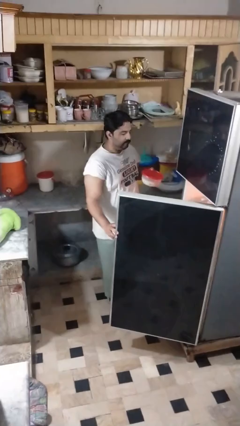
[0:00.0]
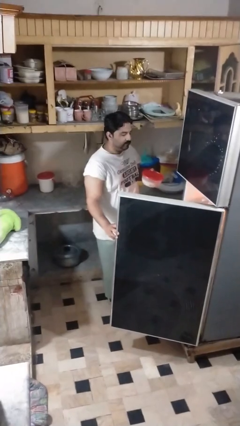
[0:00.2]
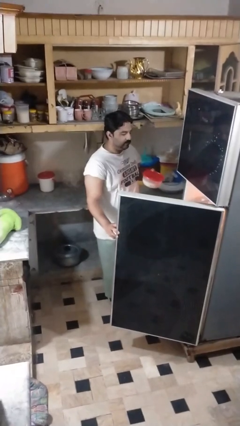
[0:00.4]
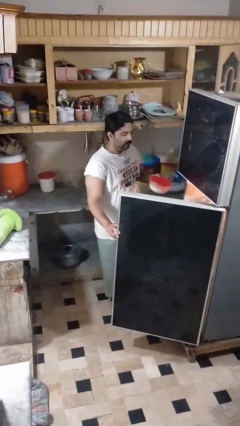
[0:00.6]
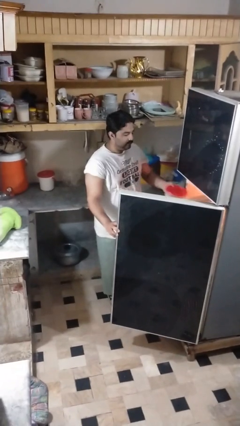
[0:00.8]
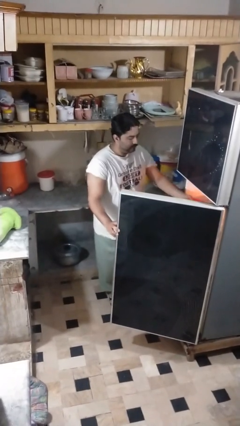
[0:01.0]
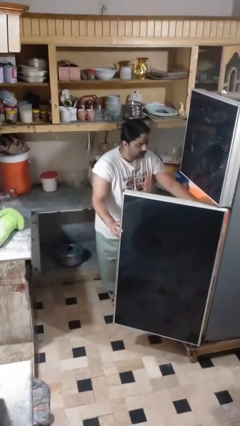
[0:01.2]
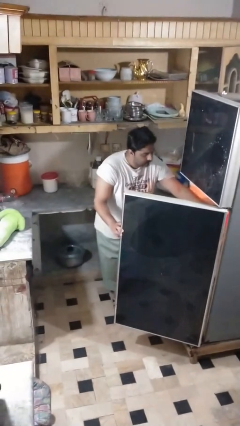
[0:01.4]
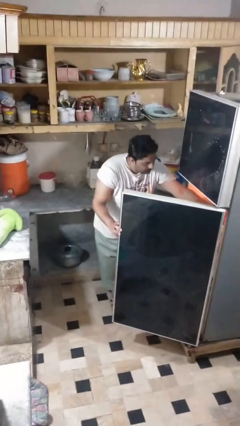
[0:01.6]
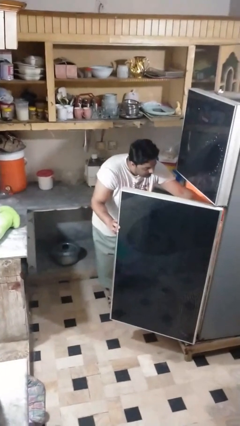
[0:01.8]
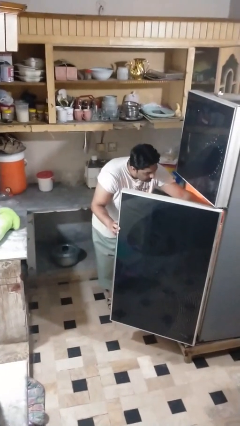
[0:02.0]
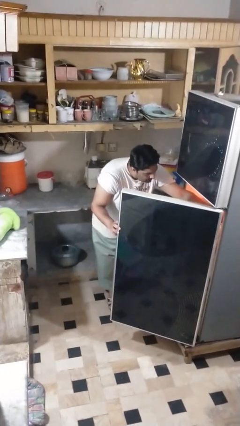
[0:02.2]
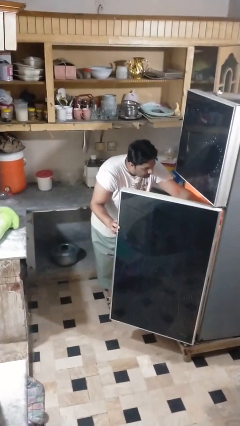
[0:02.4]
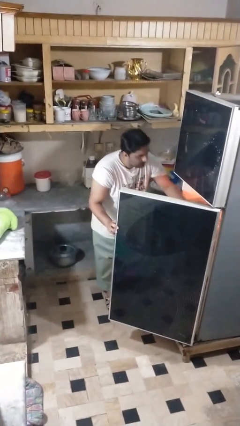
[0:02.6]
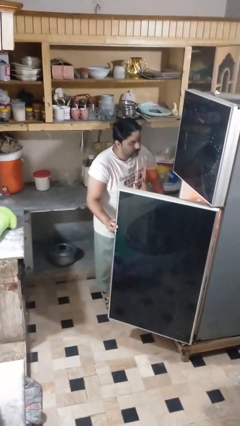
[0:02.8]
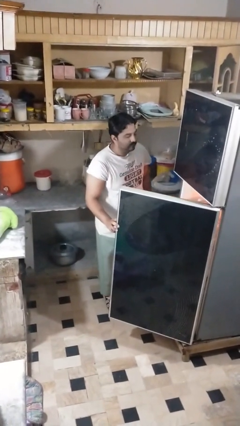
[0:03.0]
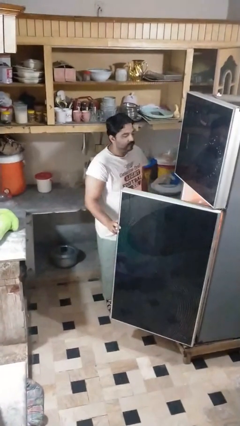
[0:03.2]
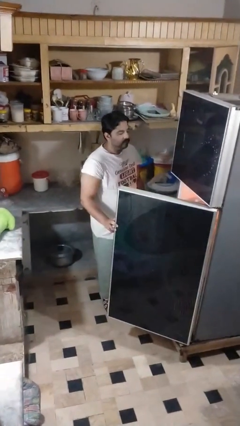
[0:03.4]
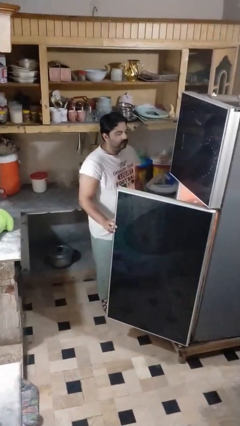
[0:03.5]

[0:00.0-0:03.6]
person puts object into refrigerator

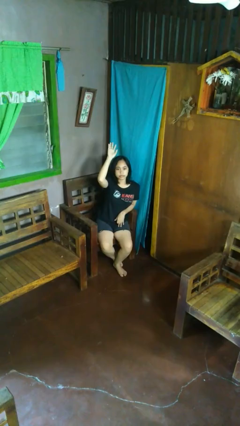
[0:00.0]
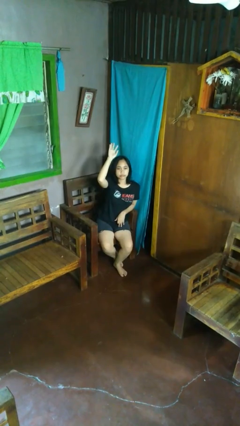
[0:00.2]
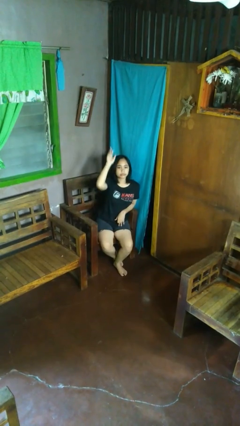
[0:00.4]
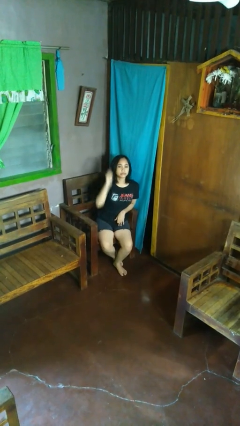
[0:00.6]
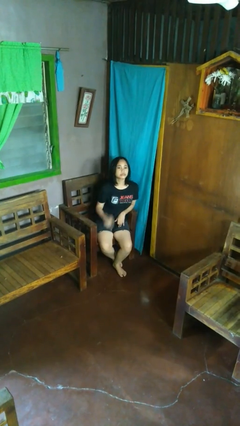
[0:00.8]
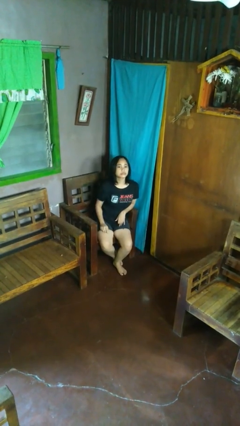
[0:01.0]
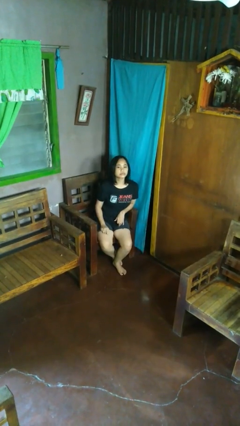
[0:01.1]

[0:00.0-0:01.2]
person gestures lower hand

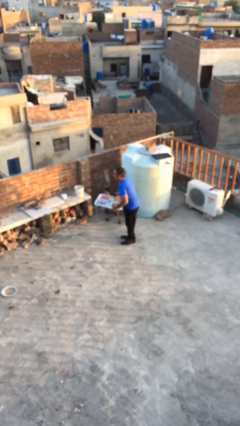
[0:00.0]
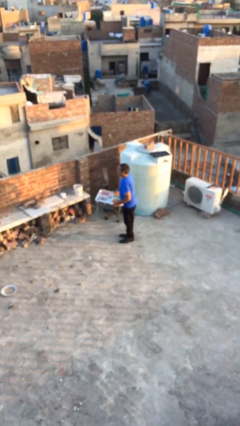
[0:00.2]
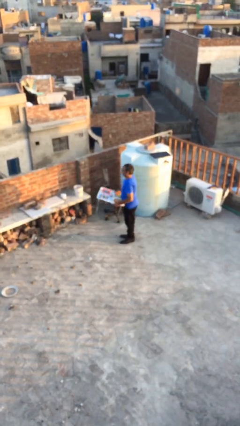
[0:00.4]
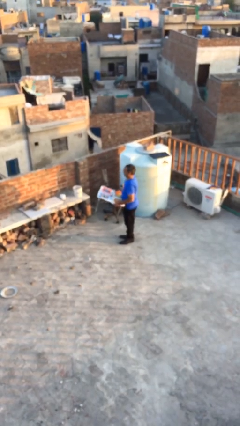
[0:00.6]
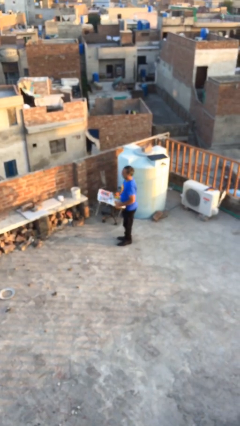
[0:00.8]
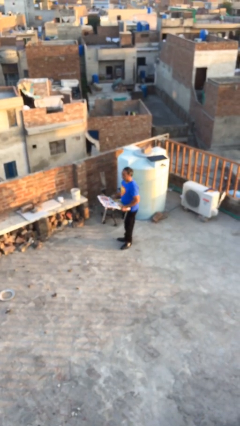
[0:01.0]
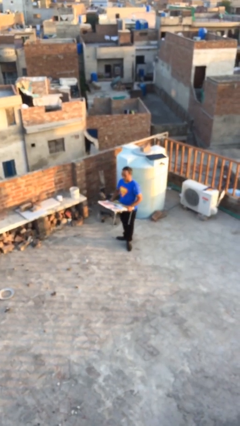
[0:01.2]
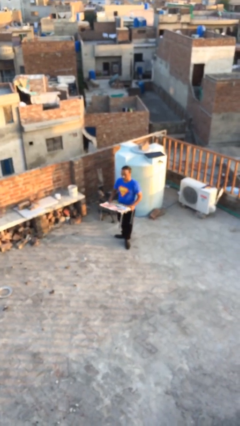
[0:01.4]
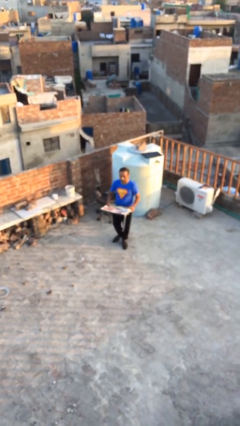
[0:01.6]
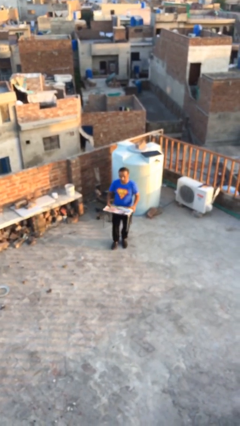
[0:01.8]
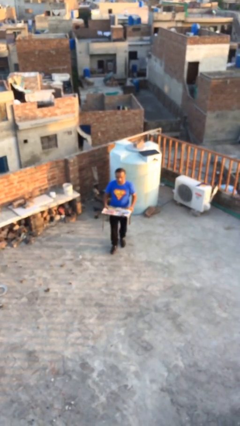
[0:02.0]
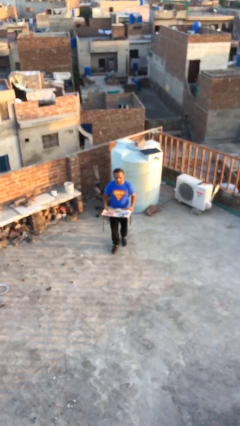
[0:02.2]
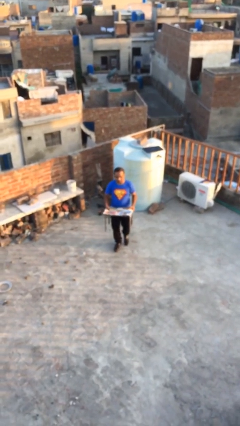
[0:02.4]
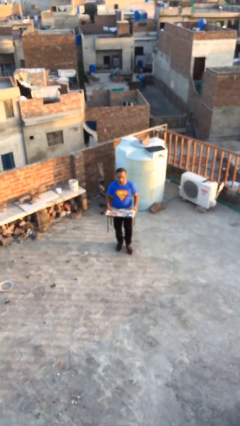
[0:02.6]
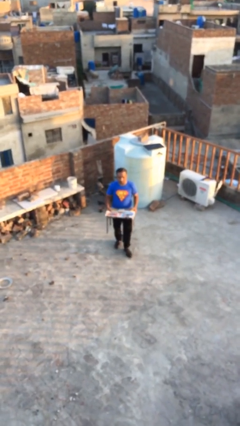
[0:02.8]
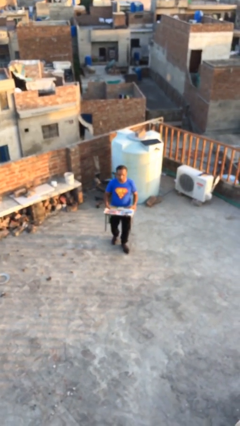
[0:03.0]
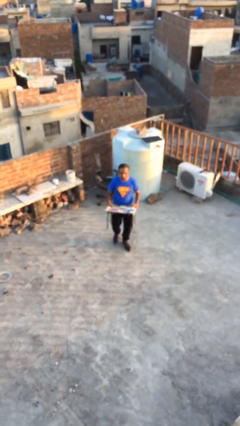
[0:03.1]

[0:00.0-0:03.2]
person carries heavy object

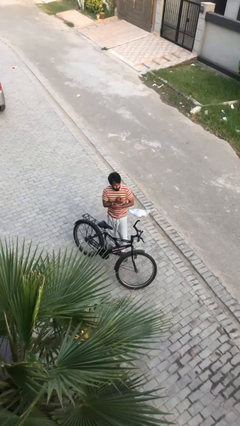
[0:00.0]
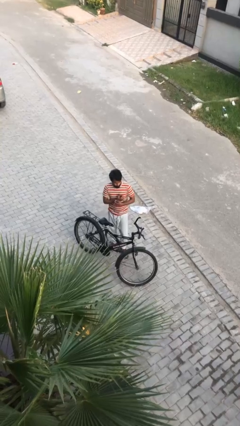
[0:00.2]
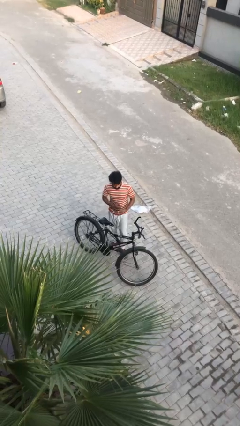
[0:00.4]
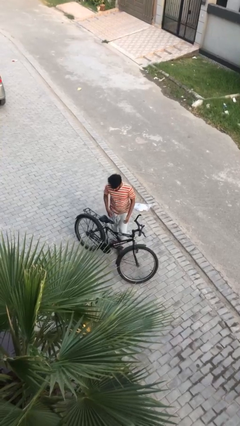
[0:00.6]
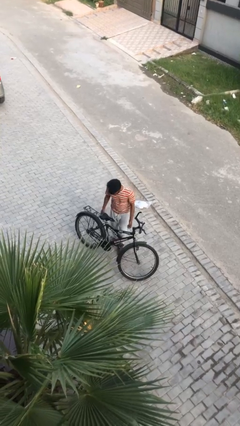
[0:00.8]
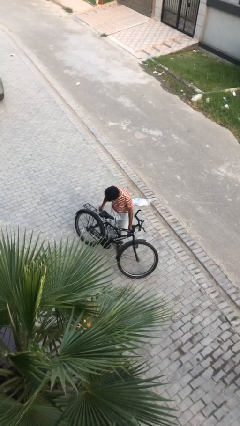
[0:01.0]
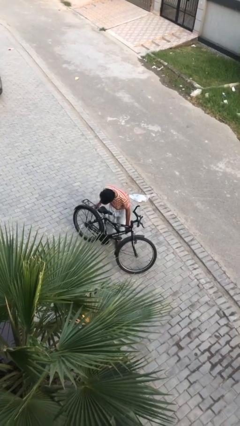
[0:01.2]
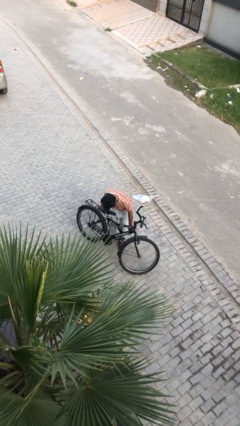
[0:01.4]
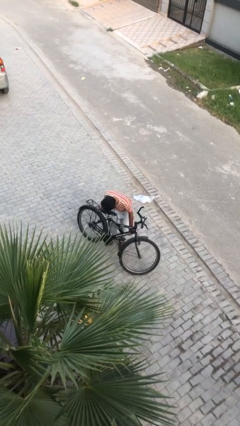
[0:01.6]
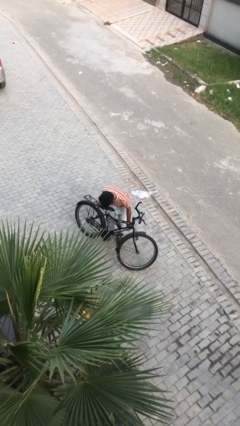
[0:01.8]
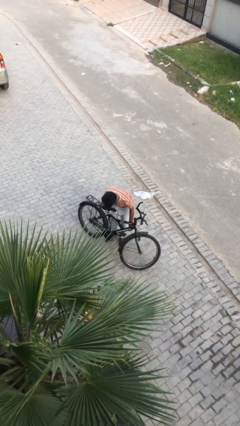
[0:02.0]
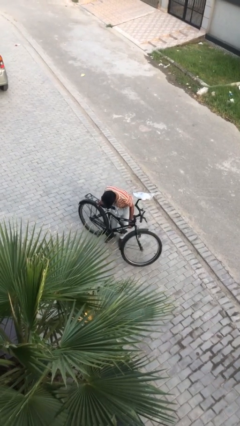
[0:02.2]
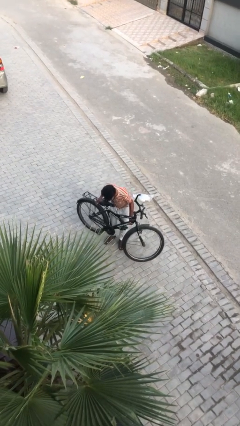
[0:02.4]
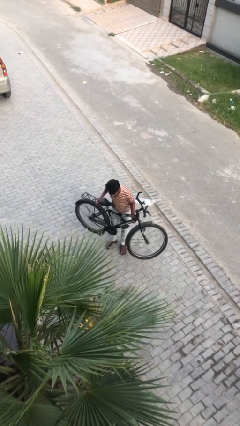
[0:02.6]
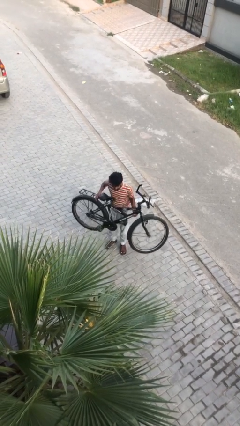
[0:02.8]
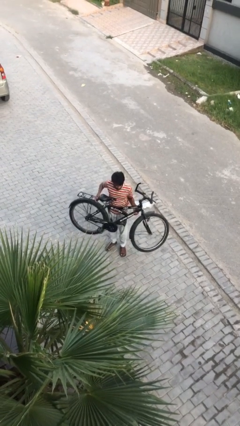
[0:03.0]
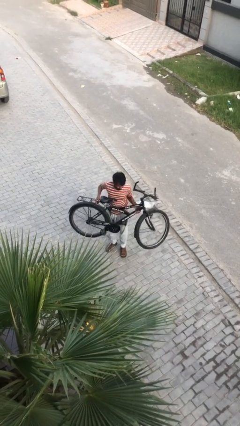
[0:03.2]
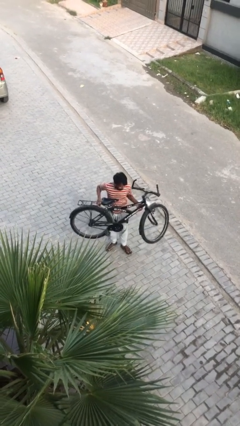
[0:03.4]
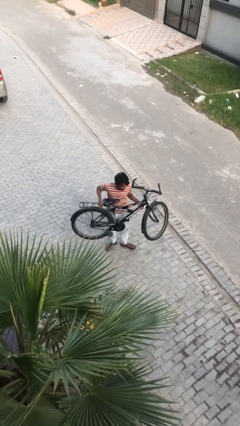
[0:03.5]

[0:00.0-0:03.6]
person picks up object from floor

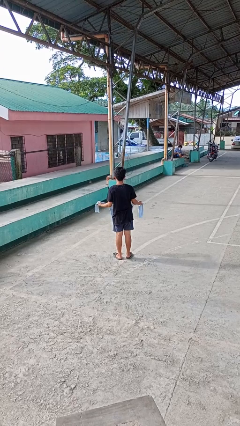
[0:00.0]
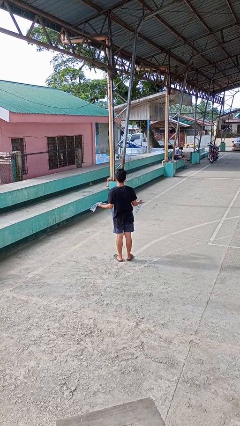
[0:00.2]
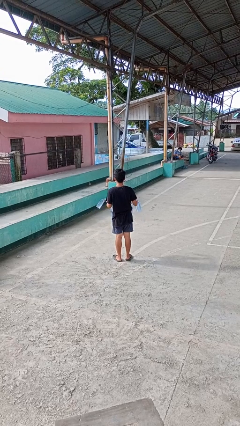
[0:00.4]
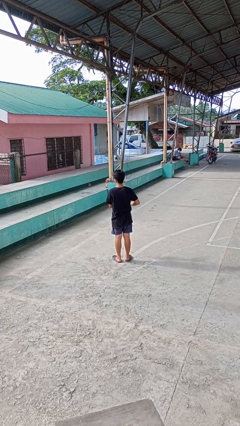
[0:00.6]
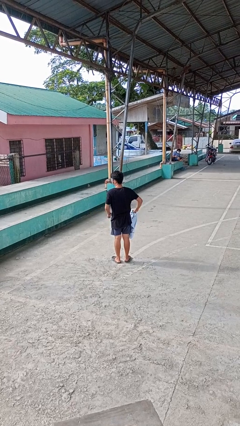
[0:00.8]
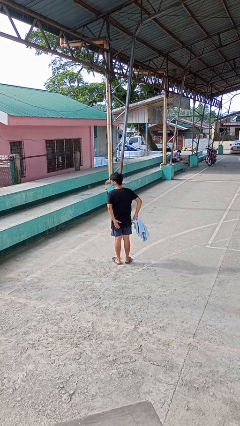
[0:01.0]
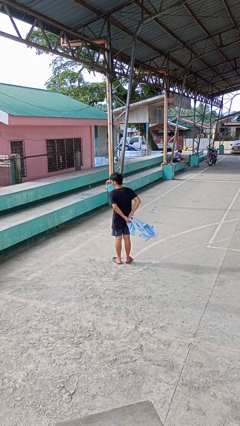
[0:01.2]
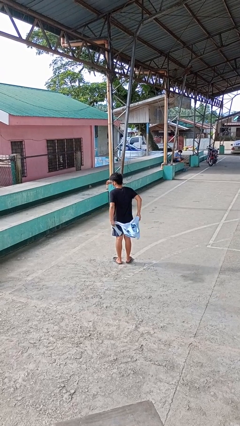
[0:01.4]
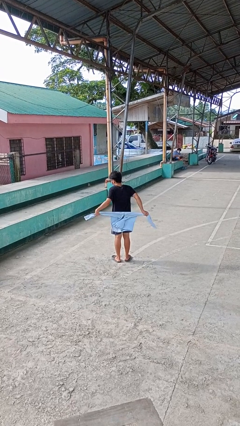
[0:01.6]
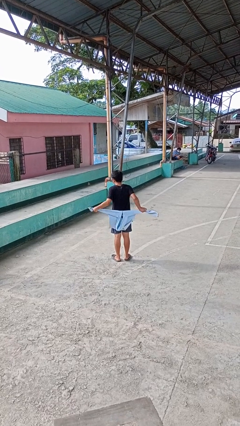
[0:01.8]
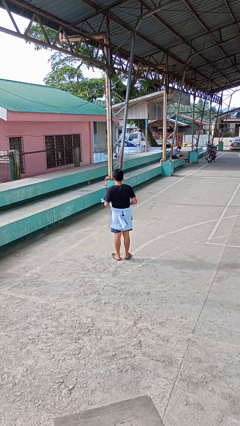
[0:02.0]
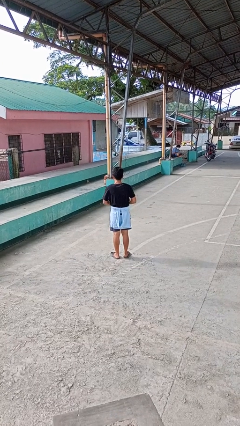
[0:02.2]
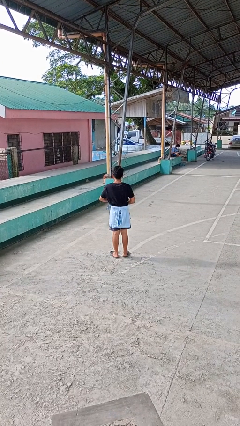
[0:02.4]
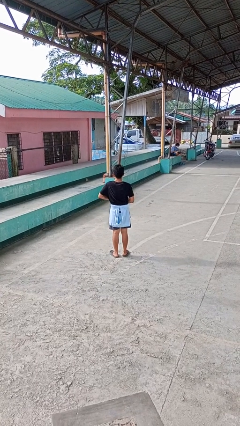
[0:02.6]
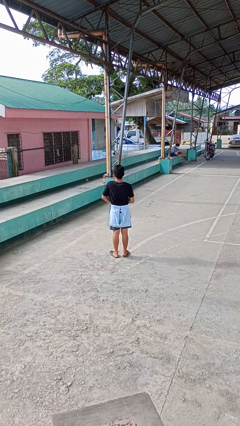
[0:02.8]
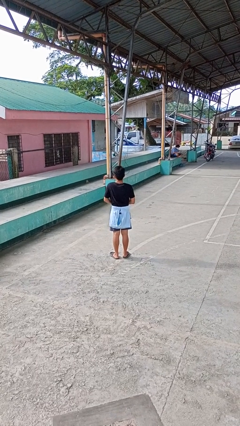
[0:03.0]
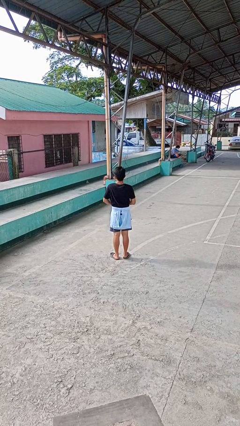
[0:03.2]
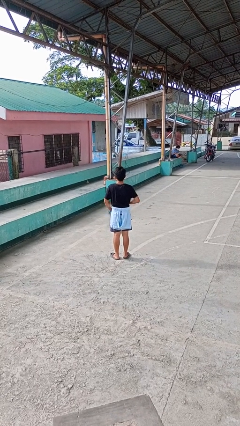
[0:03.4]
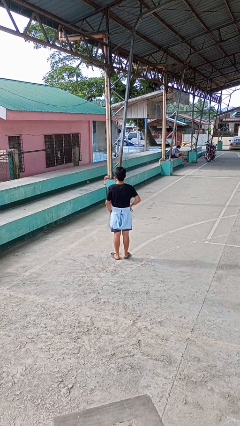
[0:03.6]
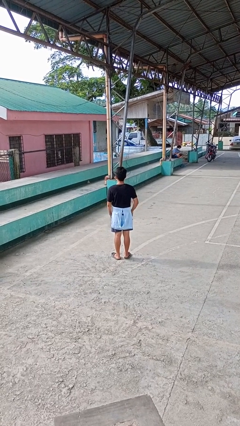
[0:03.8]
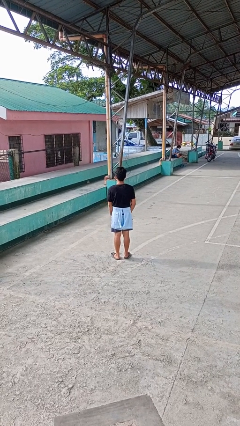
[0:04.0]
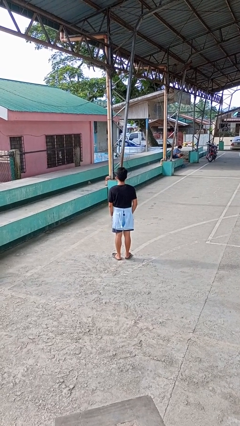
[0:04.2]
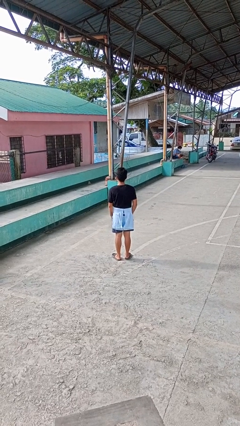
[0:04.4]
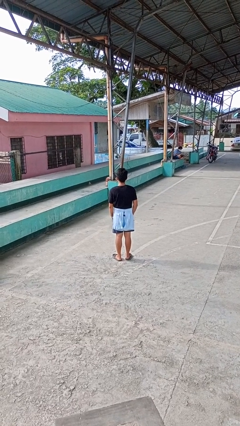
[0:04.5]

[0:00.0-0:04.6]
person ties jacket around waist

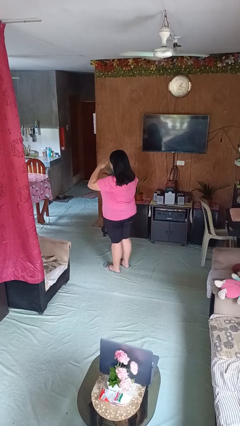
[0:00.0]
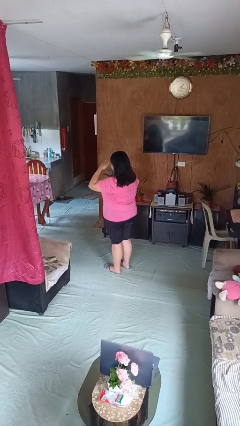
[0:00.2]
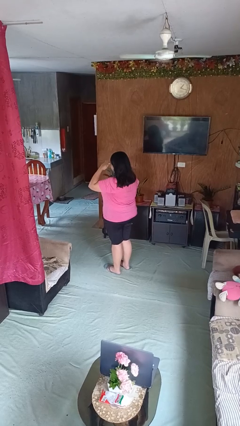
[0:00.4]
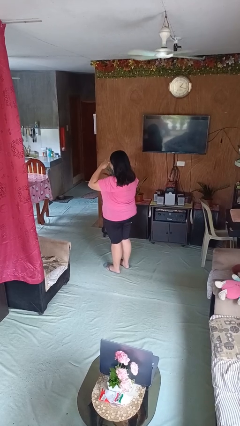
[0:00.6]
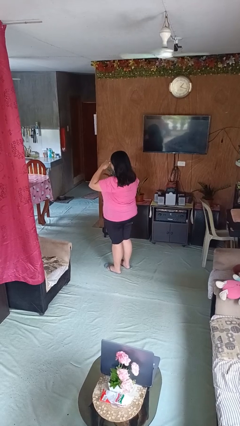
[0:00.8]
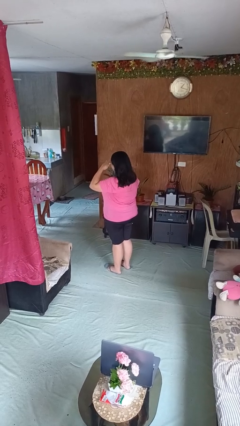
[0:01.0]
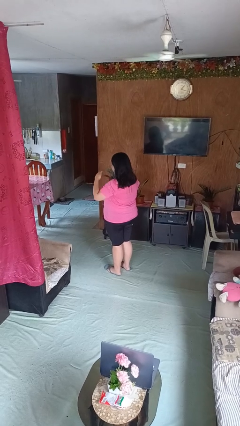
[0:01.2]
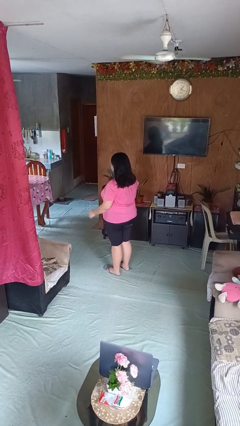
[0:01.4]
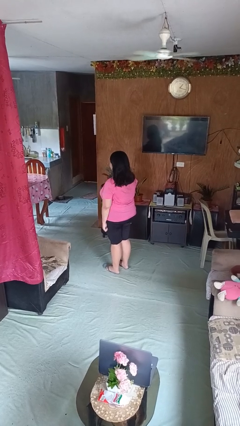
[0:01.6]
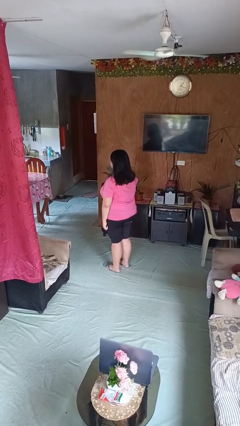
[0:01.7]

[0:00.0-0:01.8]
person salutes
